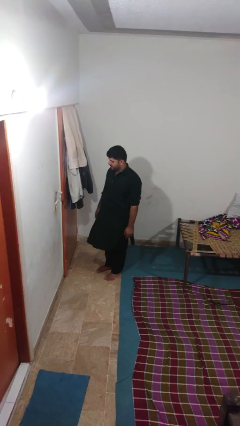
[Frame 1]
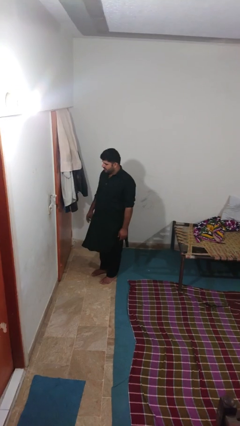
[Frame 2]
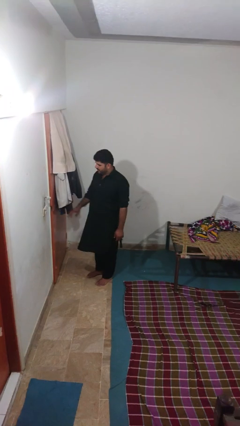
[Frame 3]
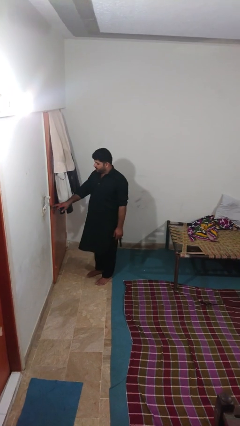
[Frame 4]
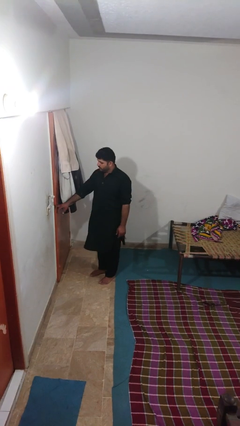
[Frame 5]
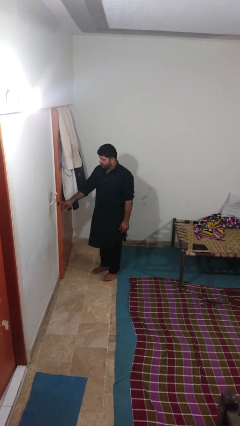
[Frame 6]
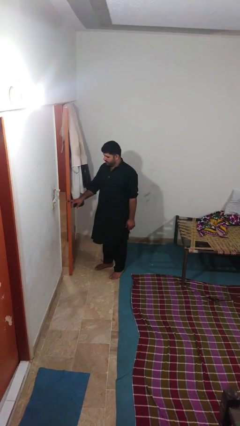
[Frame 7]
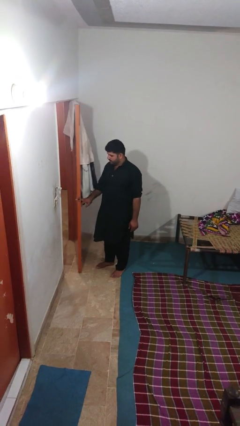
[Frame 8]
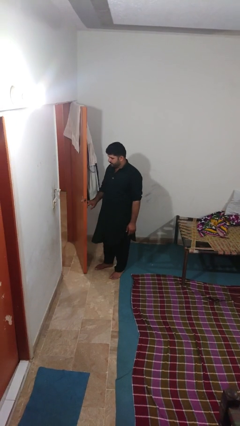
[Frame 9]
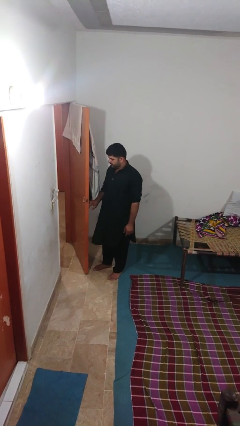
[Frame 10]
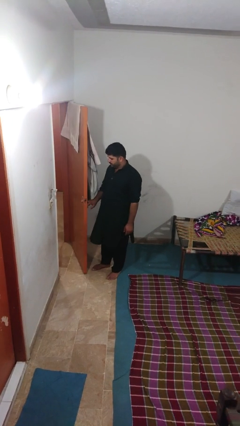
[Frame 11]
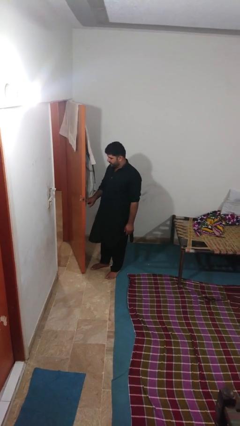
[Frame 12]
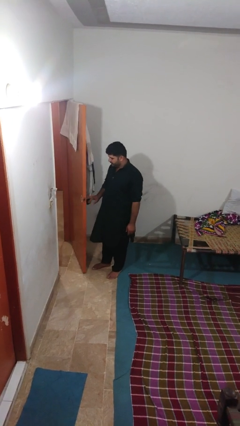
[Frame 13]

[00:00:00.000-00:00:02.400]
person opens facility door

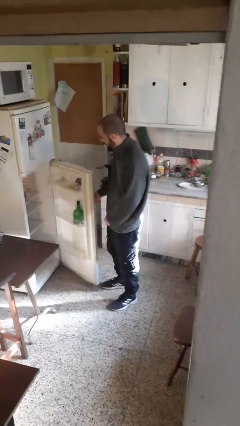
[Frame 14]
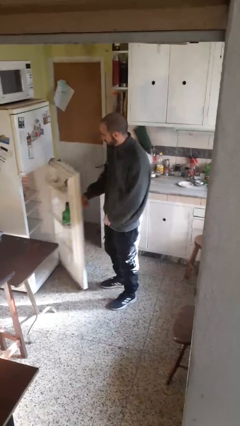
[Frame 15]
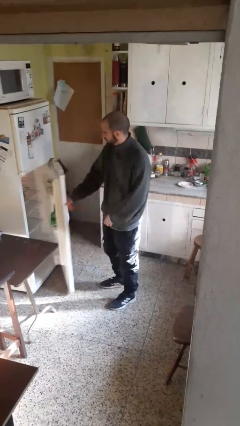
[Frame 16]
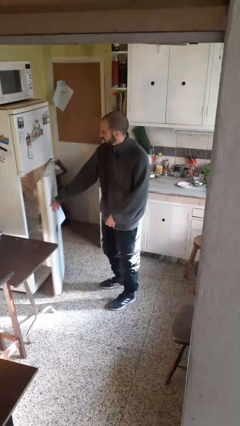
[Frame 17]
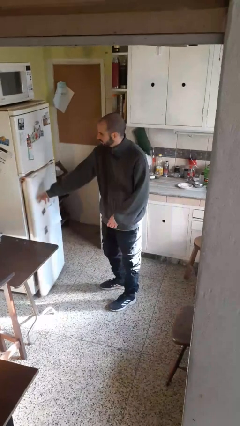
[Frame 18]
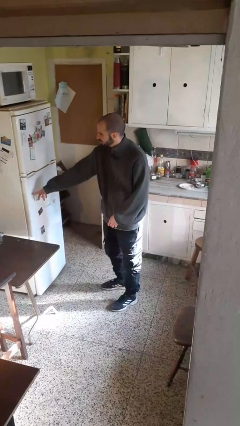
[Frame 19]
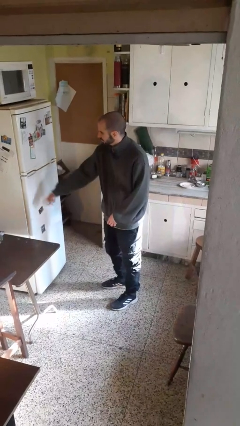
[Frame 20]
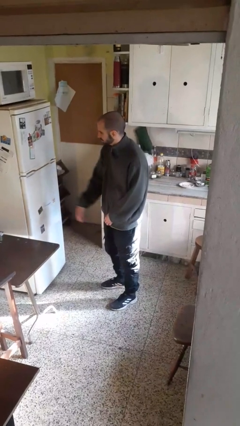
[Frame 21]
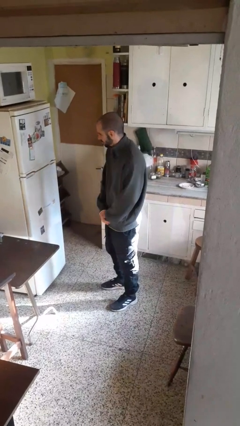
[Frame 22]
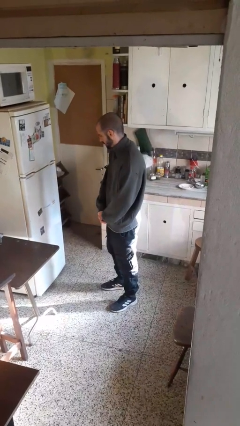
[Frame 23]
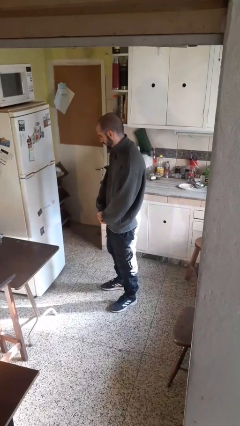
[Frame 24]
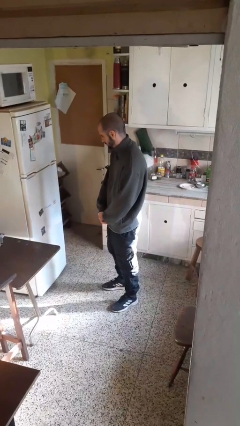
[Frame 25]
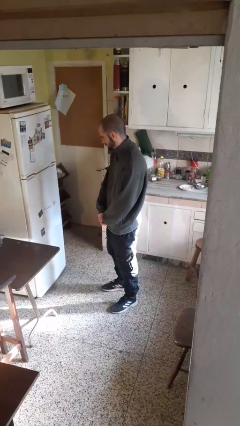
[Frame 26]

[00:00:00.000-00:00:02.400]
person closes refrigerator

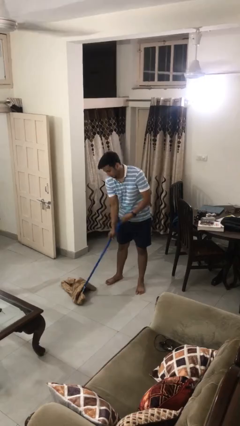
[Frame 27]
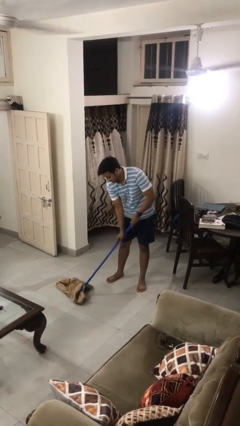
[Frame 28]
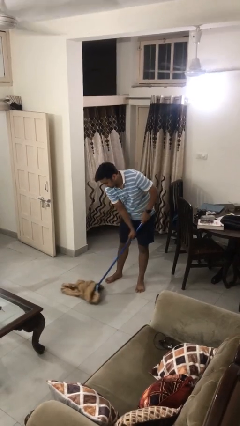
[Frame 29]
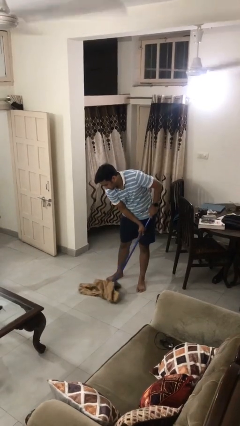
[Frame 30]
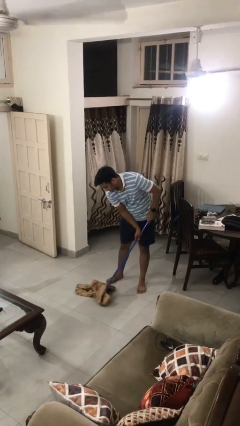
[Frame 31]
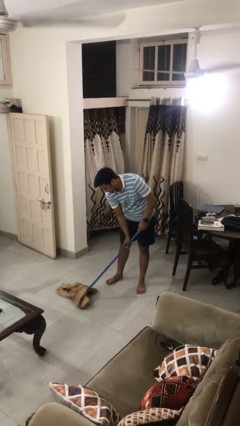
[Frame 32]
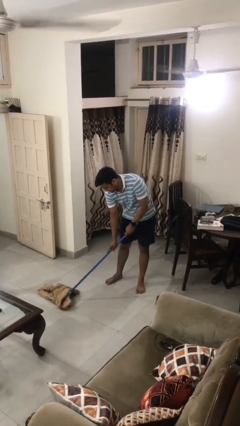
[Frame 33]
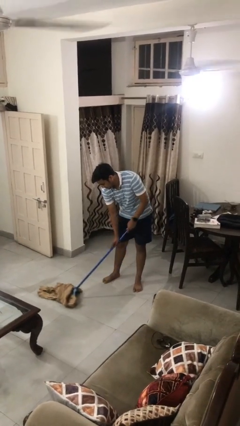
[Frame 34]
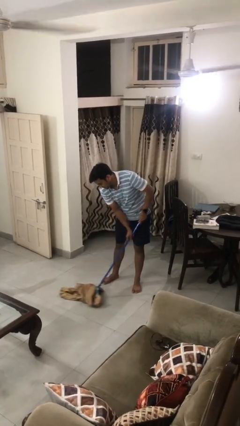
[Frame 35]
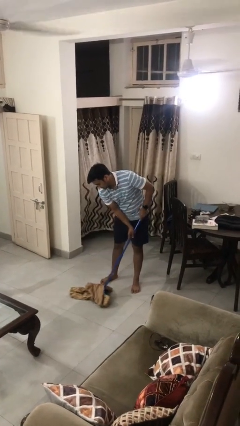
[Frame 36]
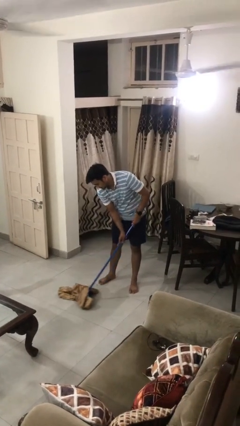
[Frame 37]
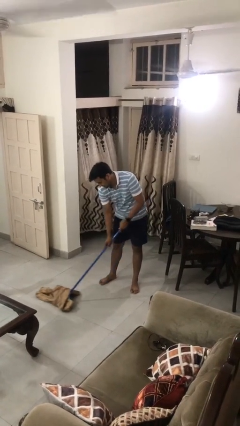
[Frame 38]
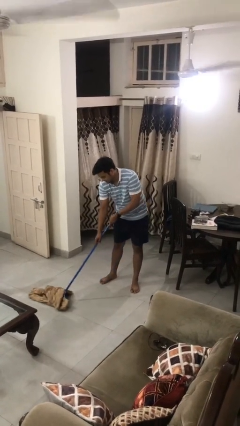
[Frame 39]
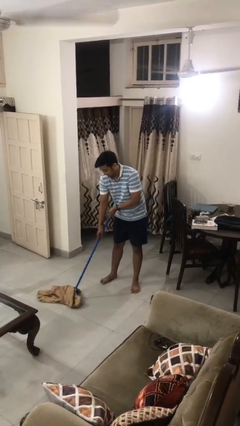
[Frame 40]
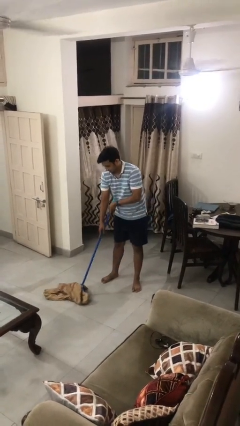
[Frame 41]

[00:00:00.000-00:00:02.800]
person mops

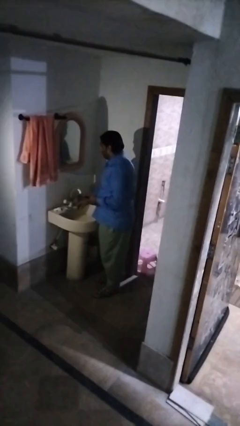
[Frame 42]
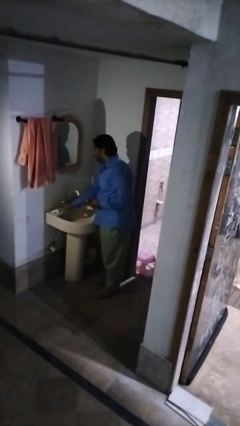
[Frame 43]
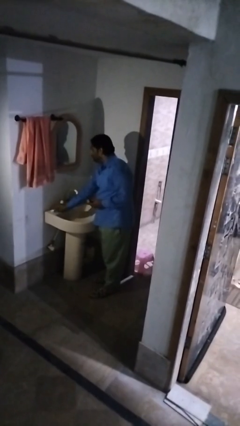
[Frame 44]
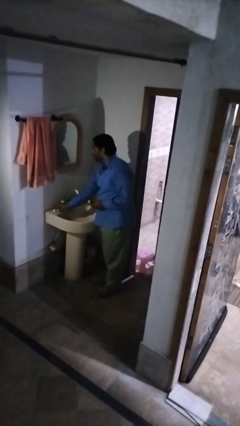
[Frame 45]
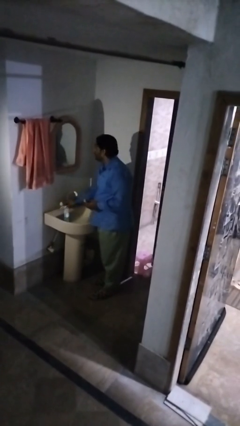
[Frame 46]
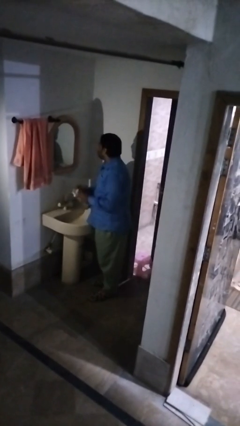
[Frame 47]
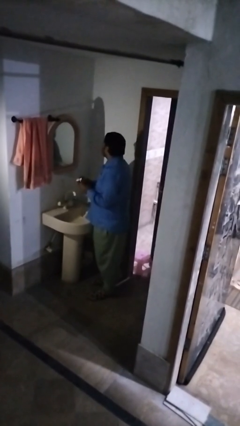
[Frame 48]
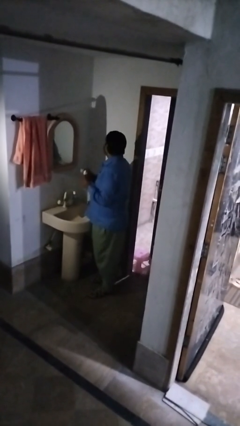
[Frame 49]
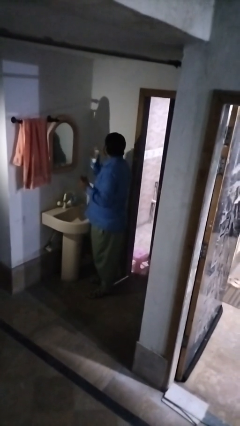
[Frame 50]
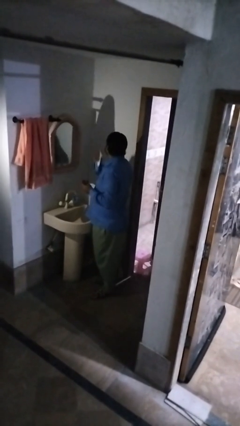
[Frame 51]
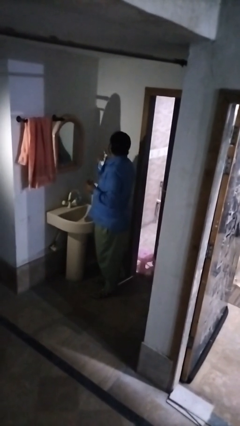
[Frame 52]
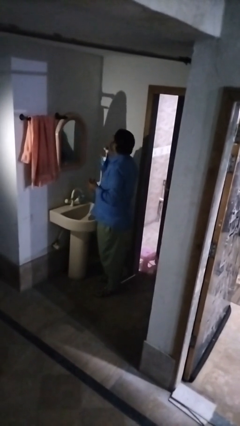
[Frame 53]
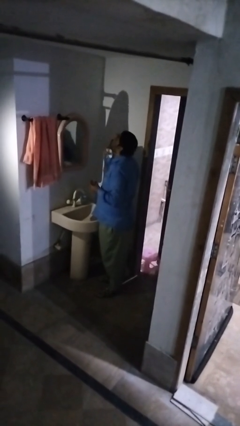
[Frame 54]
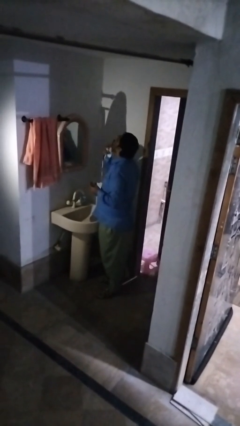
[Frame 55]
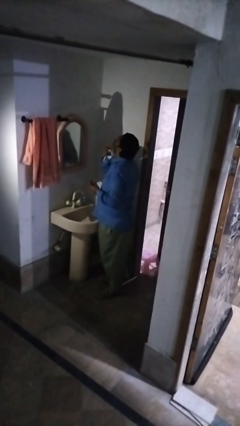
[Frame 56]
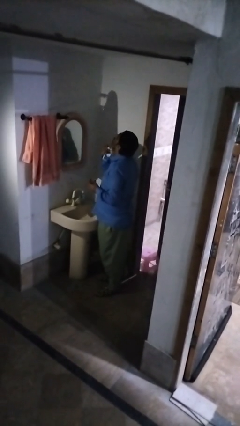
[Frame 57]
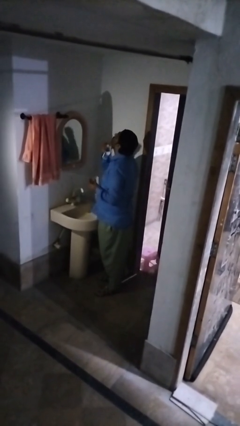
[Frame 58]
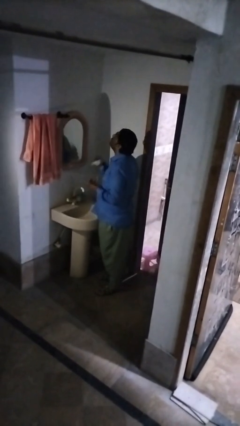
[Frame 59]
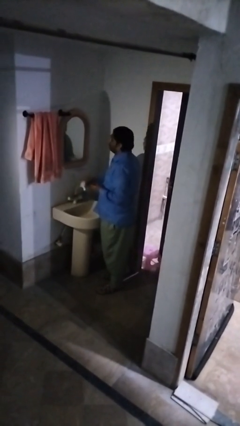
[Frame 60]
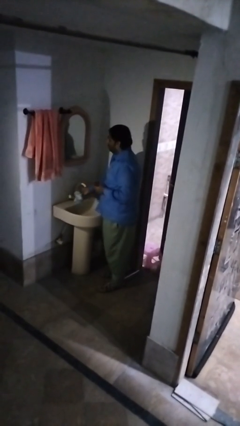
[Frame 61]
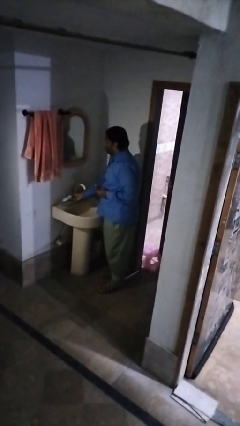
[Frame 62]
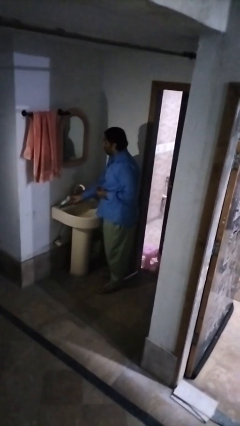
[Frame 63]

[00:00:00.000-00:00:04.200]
person applies shaving cream

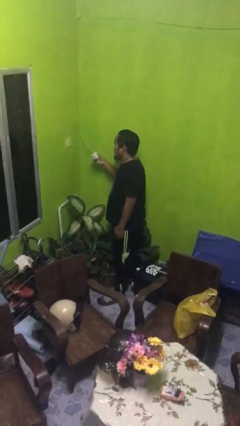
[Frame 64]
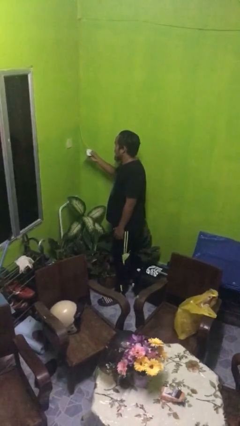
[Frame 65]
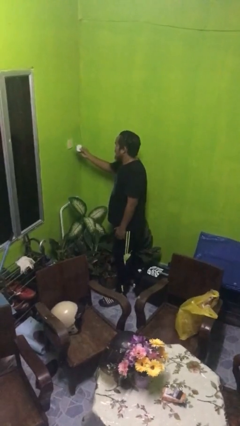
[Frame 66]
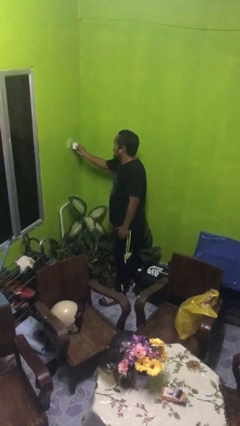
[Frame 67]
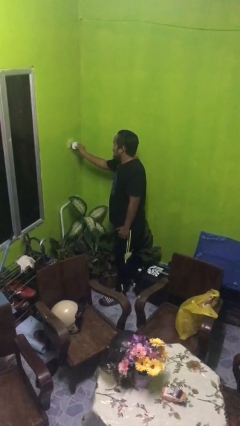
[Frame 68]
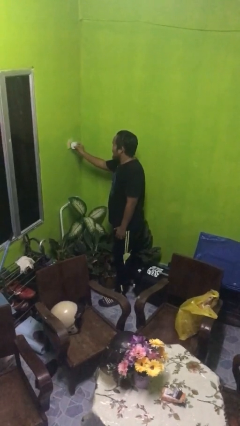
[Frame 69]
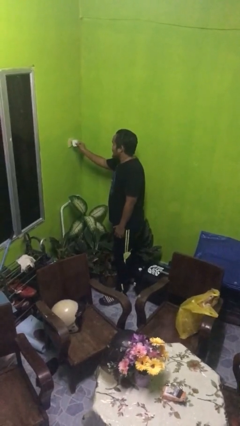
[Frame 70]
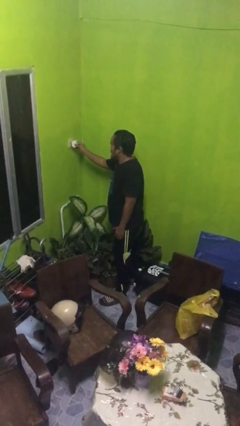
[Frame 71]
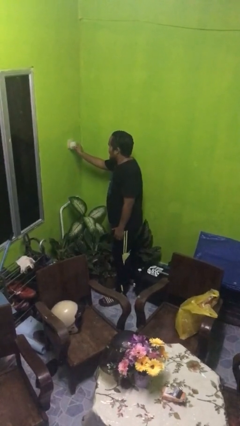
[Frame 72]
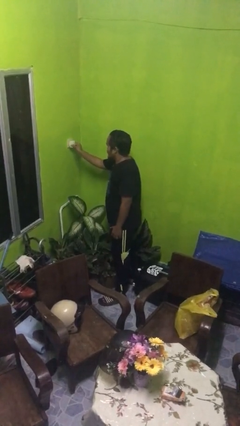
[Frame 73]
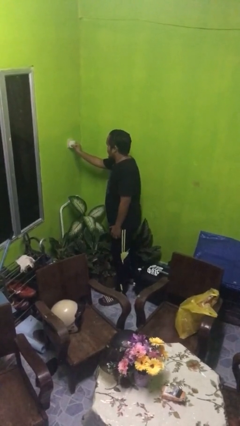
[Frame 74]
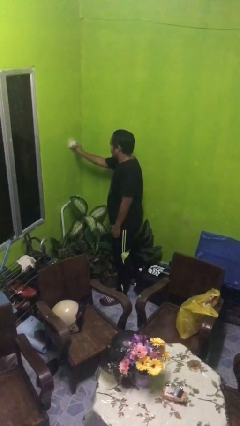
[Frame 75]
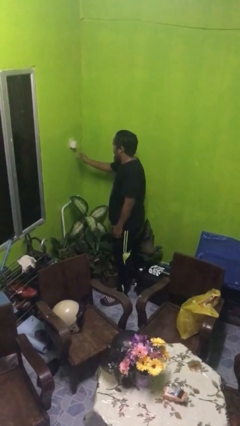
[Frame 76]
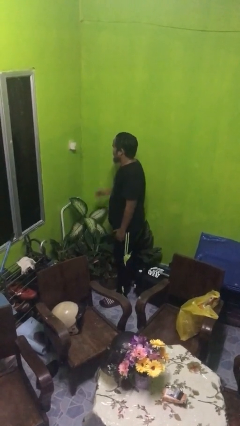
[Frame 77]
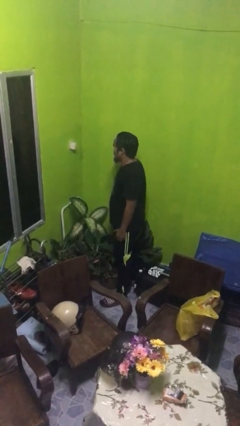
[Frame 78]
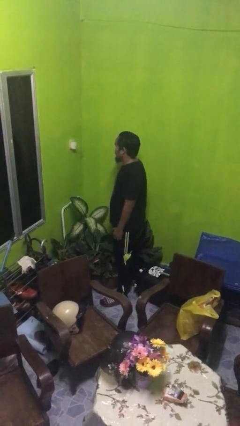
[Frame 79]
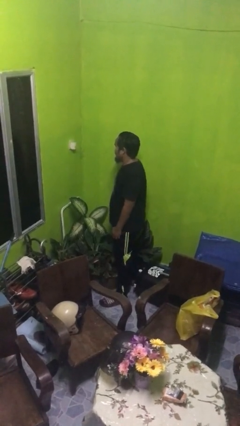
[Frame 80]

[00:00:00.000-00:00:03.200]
person plugs into electrical socket

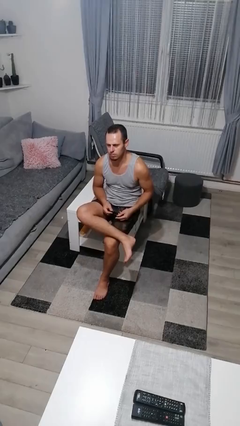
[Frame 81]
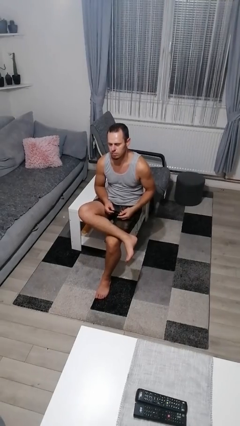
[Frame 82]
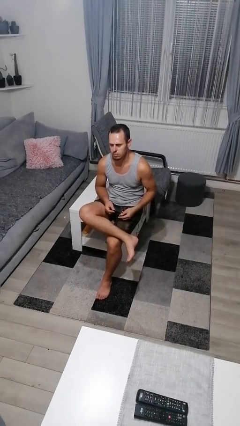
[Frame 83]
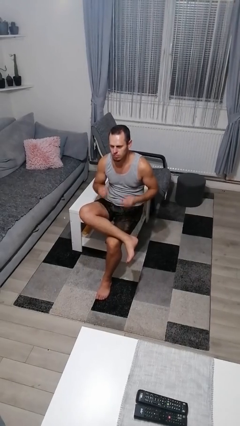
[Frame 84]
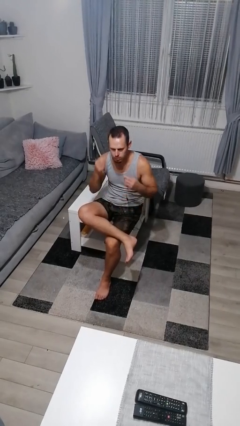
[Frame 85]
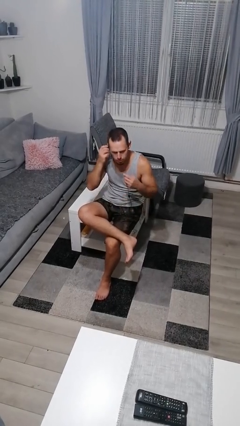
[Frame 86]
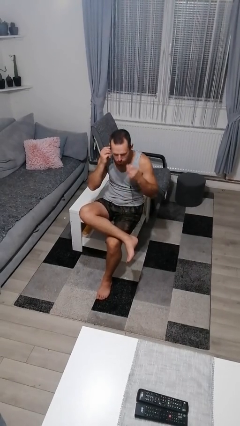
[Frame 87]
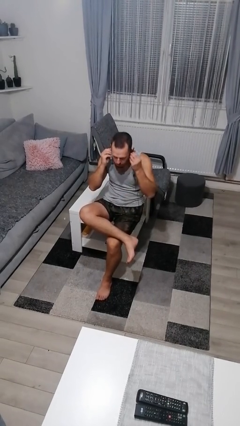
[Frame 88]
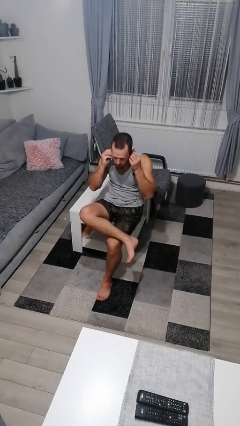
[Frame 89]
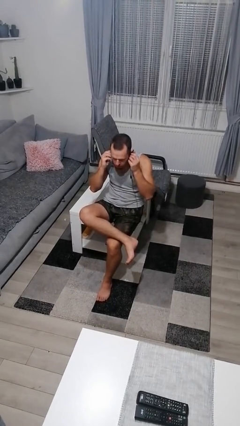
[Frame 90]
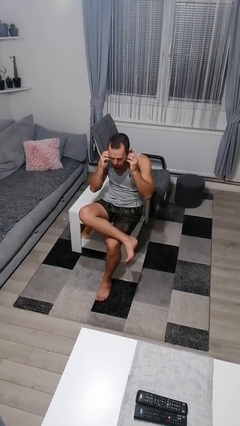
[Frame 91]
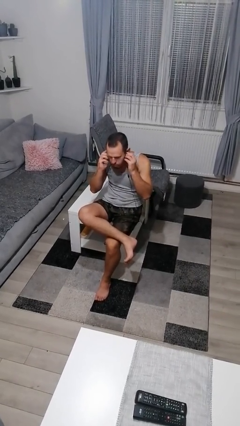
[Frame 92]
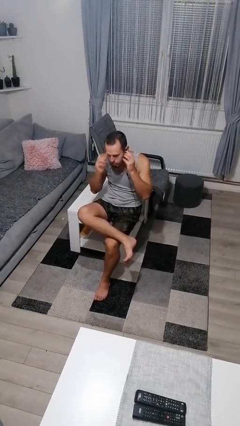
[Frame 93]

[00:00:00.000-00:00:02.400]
person puts on headphones
